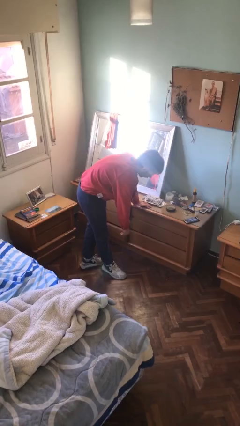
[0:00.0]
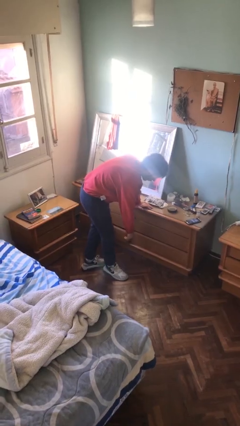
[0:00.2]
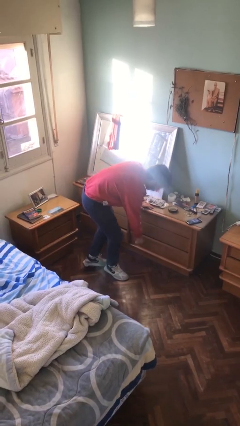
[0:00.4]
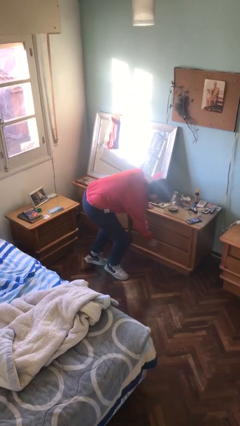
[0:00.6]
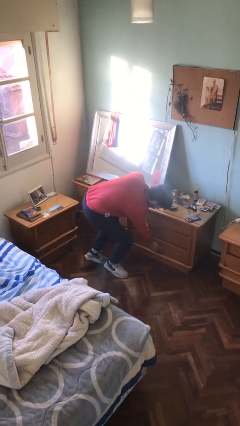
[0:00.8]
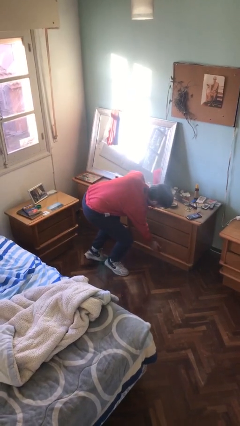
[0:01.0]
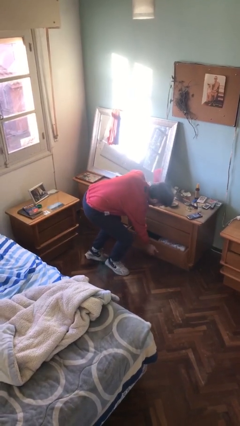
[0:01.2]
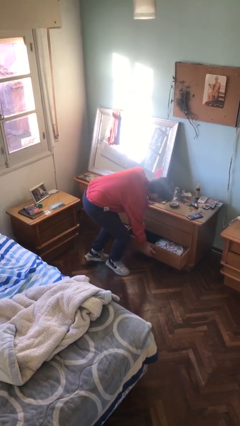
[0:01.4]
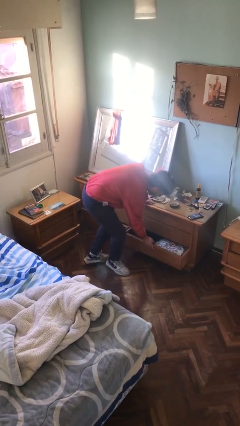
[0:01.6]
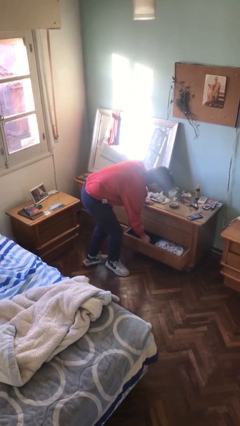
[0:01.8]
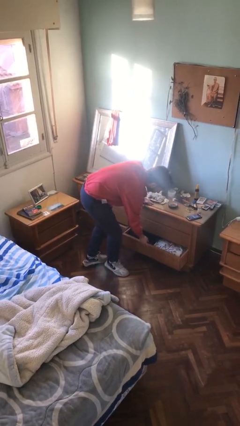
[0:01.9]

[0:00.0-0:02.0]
person opens dresser drawer

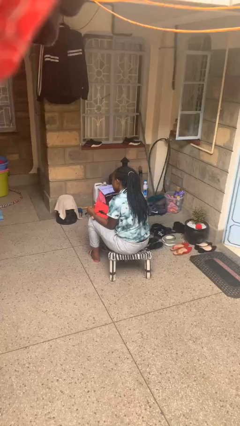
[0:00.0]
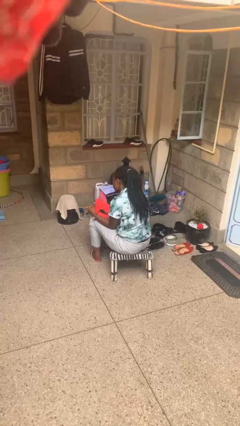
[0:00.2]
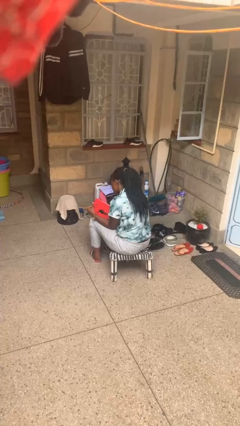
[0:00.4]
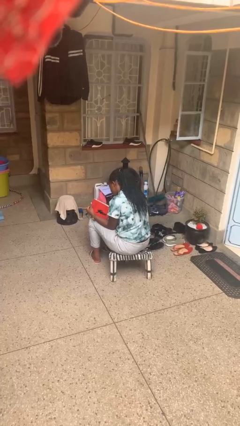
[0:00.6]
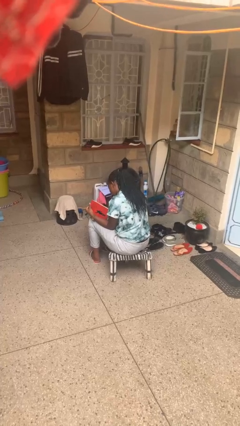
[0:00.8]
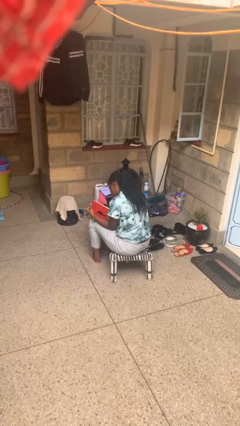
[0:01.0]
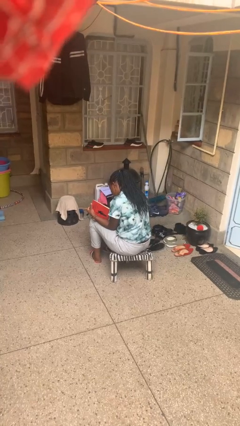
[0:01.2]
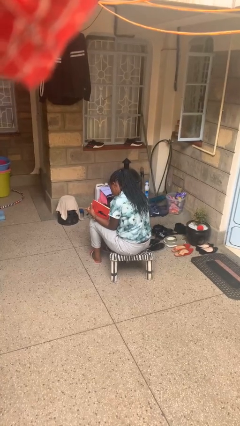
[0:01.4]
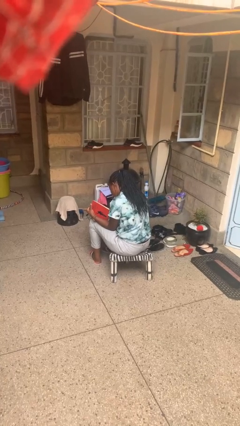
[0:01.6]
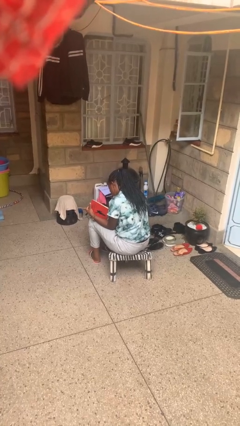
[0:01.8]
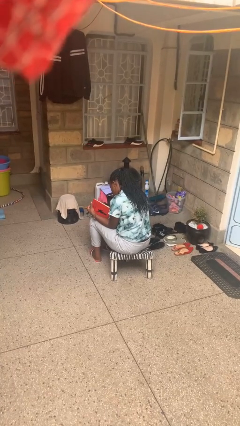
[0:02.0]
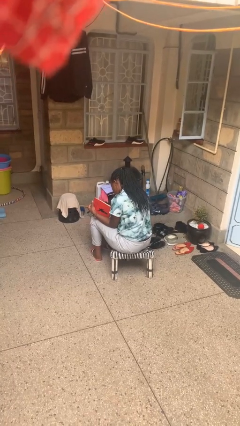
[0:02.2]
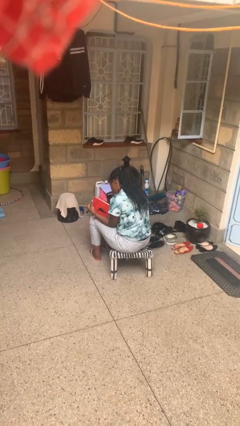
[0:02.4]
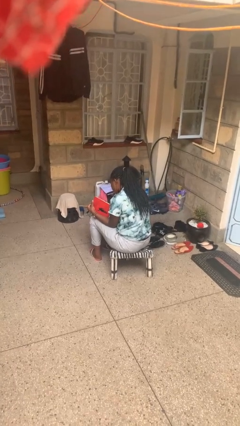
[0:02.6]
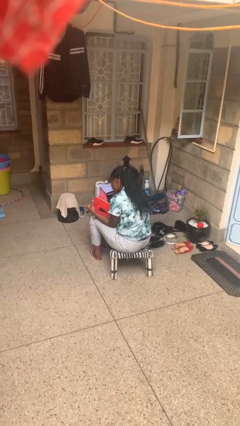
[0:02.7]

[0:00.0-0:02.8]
person reads book

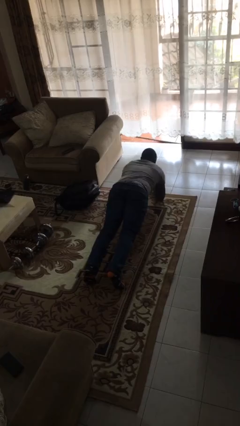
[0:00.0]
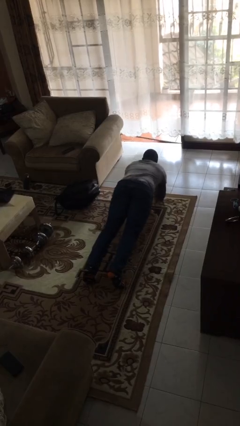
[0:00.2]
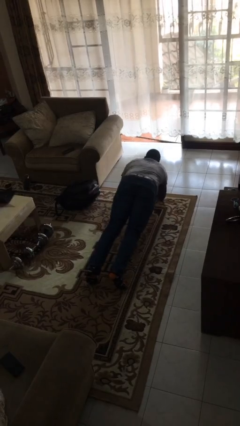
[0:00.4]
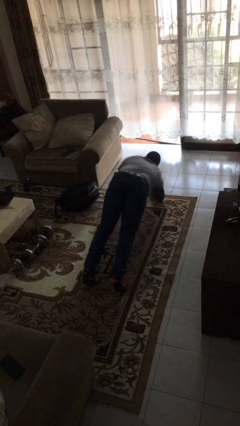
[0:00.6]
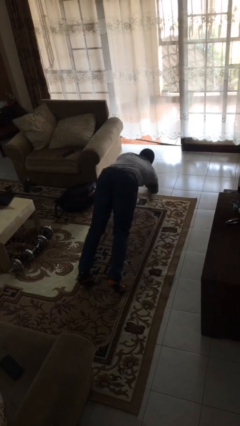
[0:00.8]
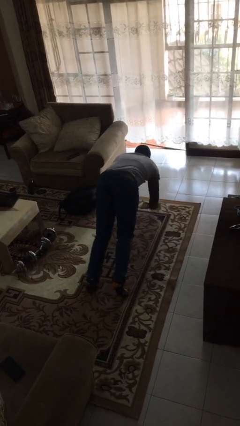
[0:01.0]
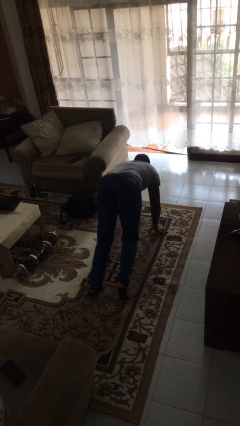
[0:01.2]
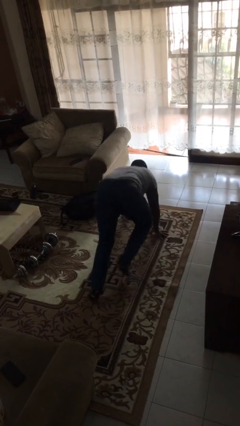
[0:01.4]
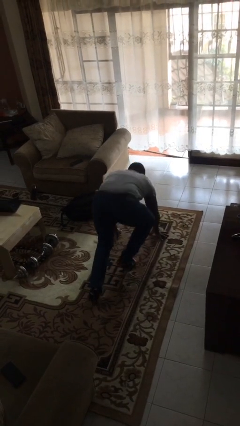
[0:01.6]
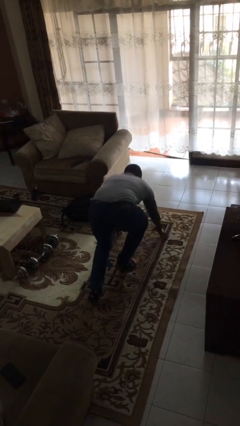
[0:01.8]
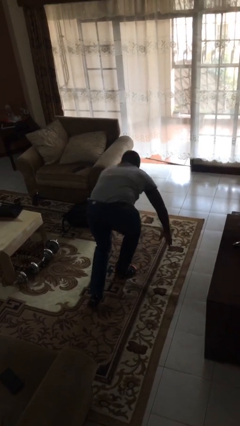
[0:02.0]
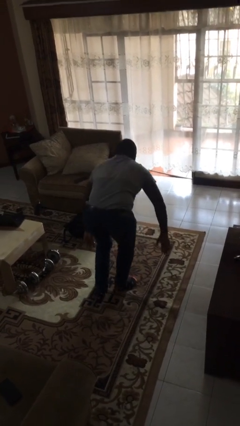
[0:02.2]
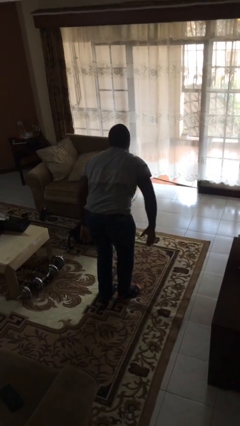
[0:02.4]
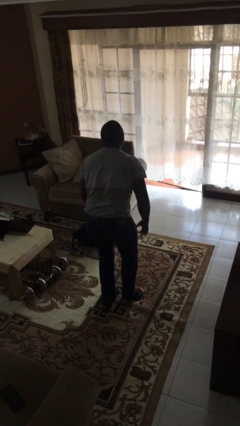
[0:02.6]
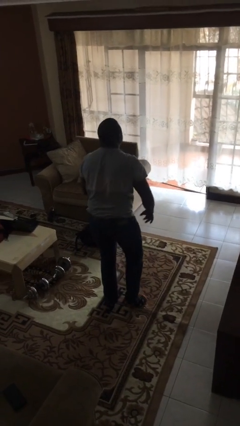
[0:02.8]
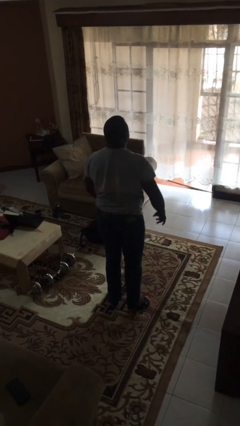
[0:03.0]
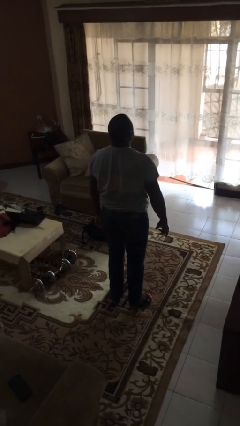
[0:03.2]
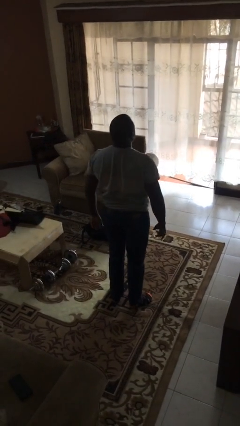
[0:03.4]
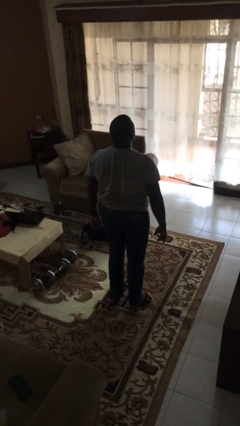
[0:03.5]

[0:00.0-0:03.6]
person stands up from floor

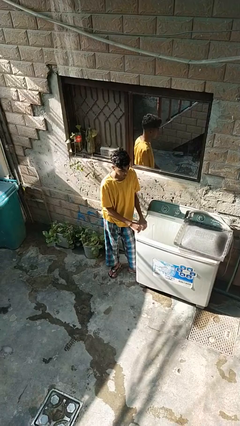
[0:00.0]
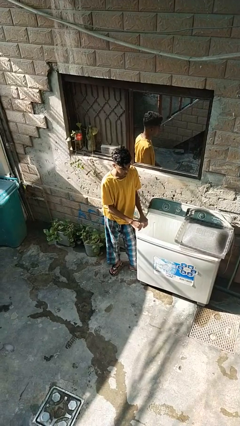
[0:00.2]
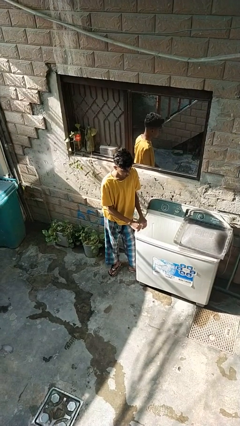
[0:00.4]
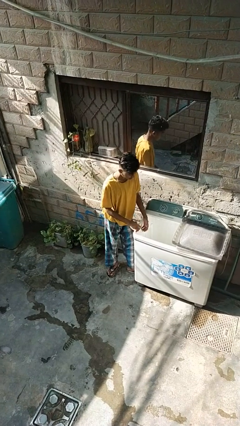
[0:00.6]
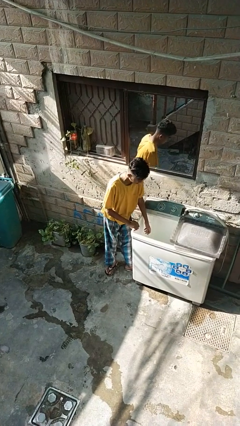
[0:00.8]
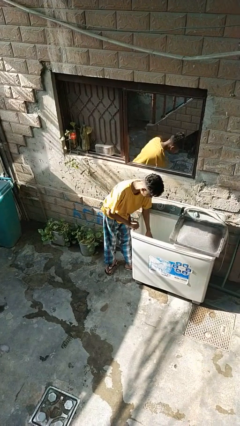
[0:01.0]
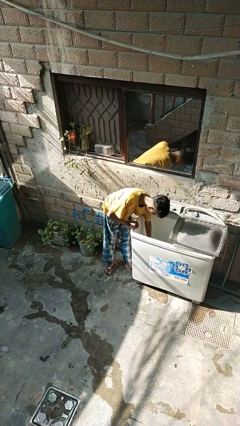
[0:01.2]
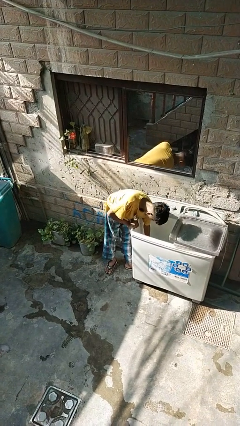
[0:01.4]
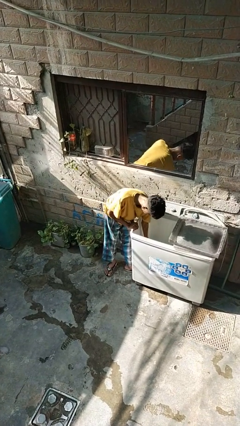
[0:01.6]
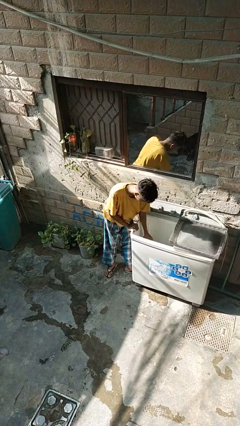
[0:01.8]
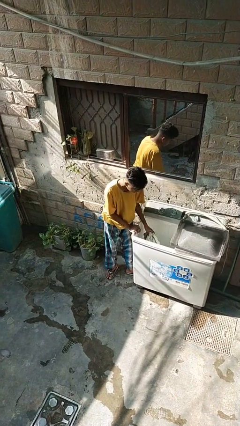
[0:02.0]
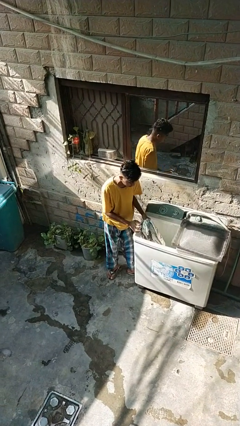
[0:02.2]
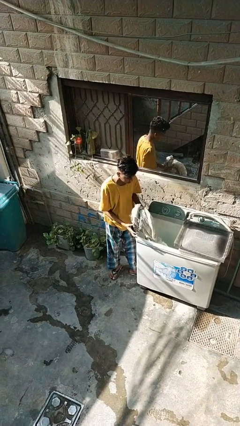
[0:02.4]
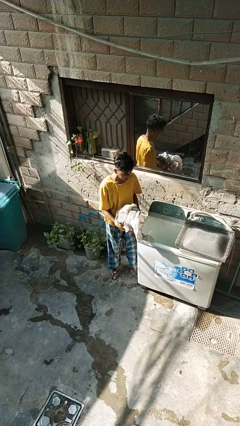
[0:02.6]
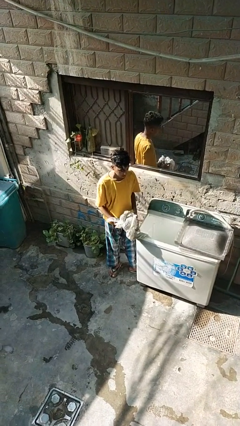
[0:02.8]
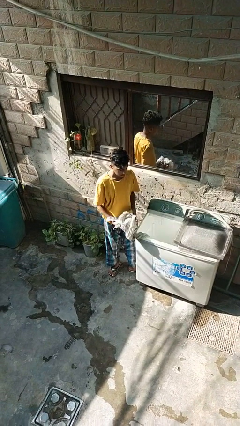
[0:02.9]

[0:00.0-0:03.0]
person unloads clotheswasher

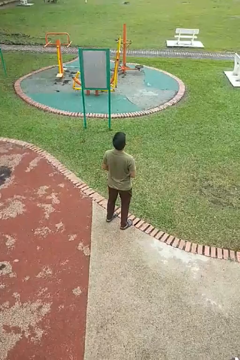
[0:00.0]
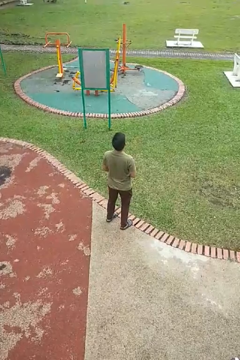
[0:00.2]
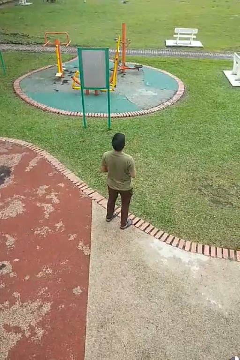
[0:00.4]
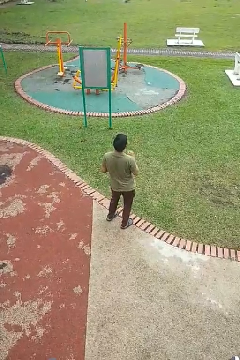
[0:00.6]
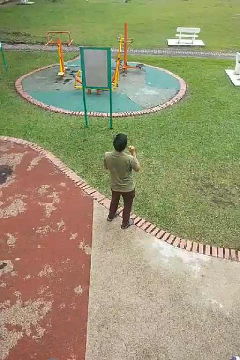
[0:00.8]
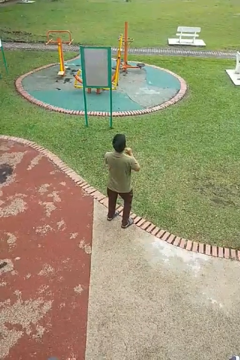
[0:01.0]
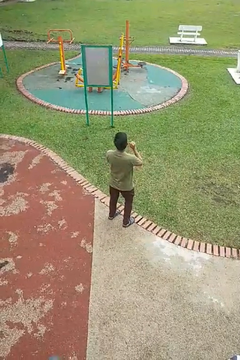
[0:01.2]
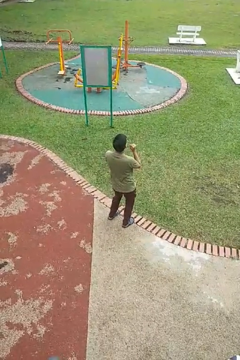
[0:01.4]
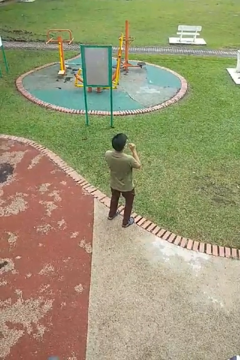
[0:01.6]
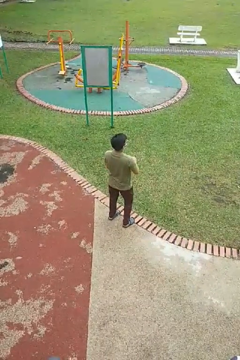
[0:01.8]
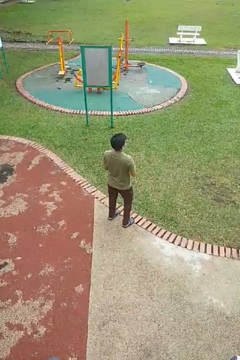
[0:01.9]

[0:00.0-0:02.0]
person wiggles hips

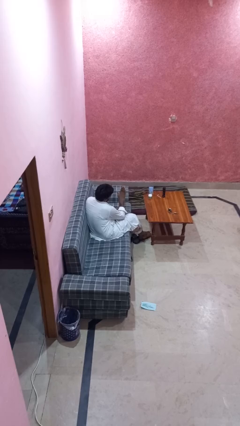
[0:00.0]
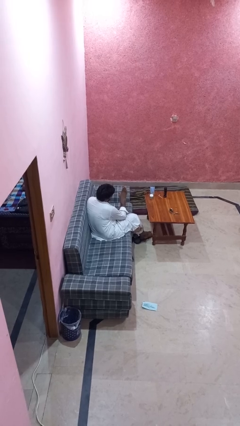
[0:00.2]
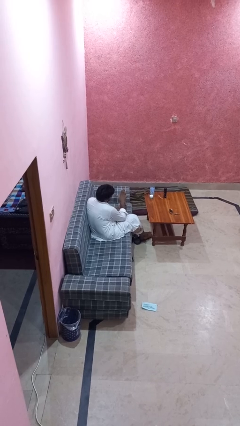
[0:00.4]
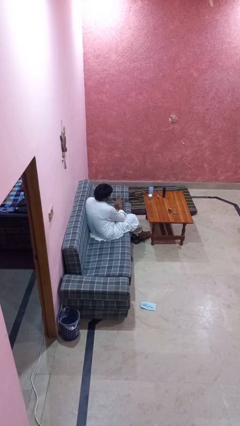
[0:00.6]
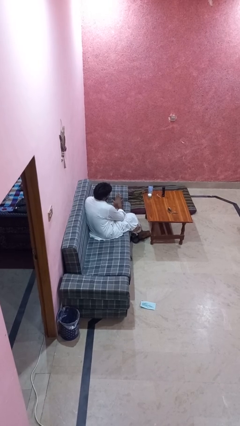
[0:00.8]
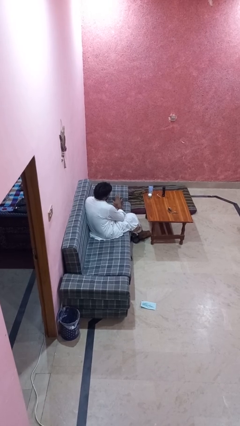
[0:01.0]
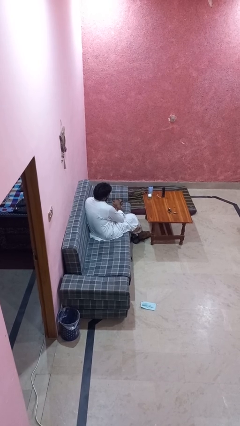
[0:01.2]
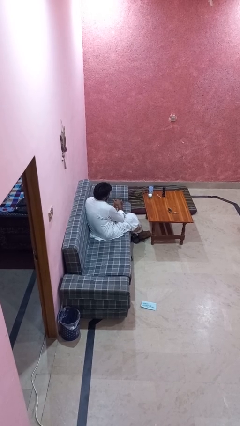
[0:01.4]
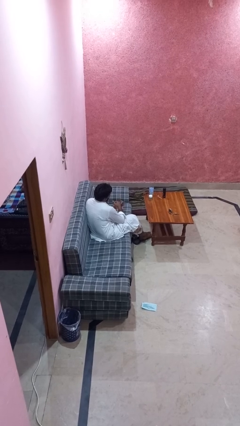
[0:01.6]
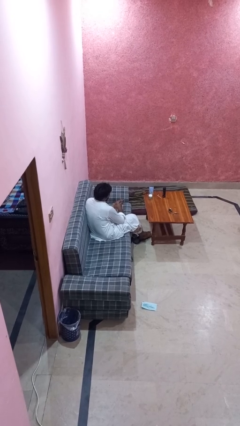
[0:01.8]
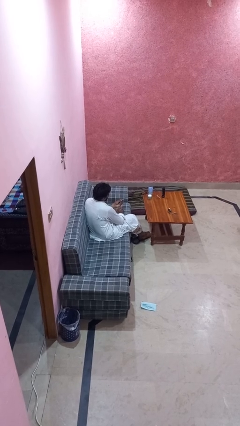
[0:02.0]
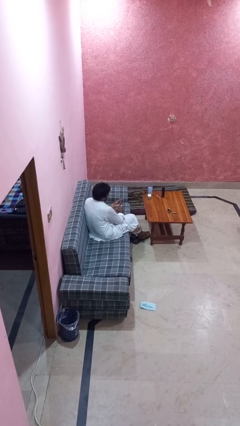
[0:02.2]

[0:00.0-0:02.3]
person takes off ring

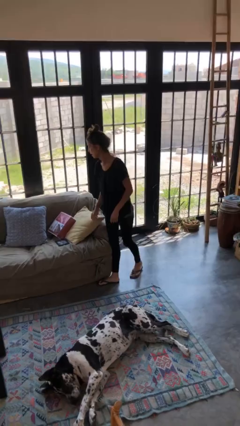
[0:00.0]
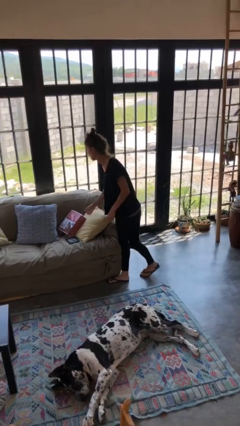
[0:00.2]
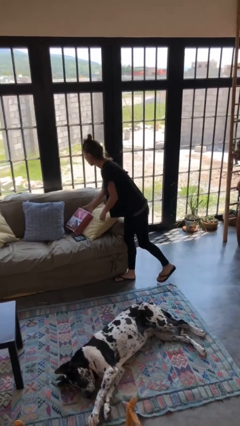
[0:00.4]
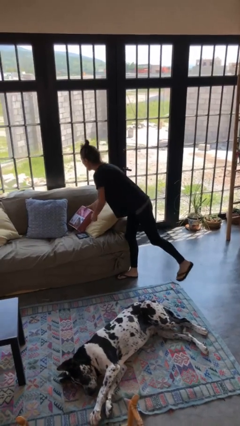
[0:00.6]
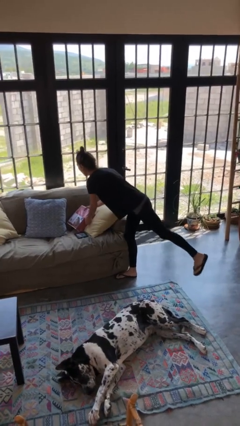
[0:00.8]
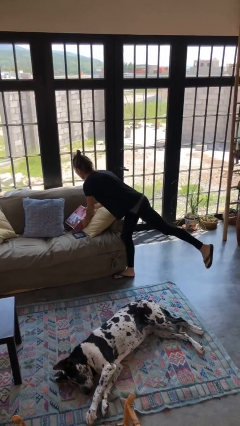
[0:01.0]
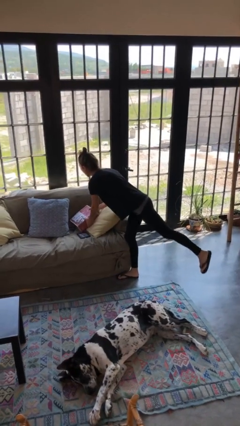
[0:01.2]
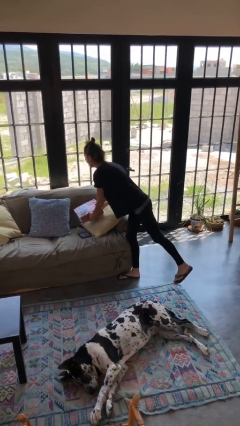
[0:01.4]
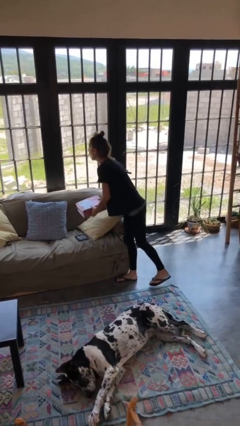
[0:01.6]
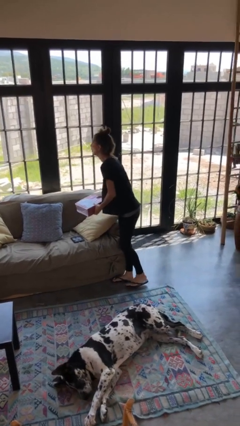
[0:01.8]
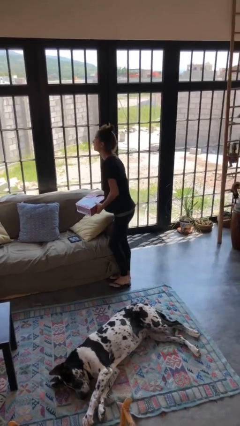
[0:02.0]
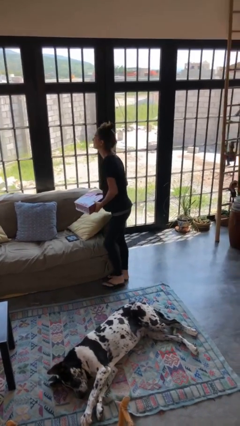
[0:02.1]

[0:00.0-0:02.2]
person picks up object from couch
